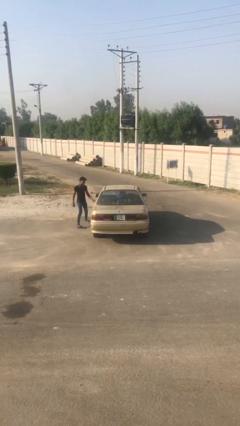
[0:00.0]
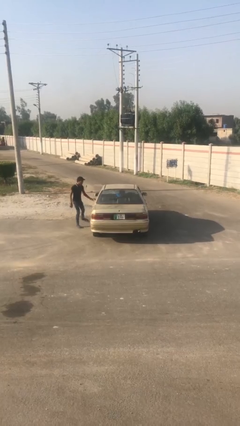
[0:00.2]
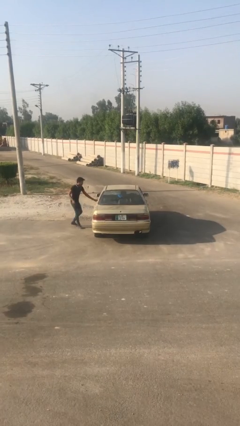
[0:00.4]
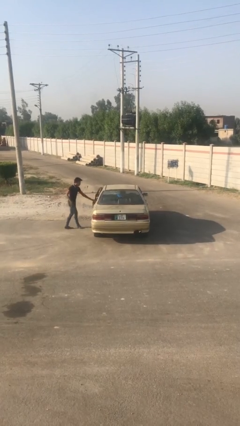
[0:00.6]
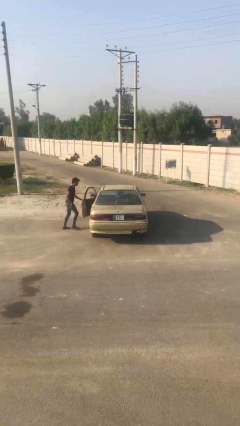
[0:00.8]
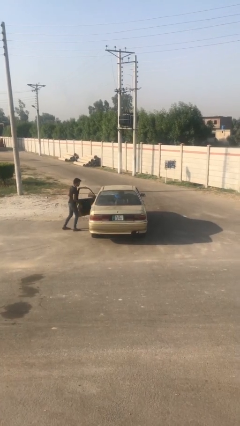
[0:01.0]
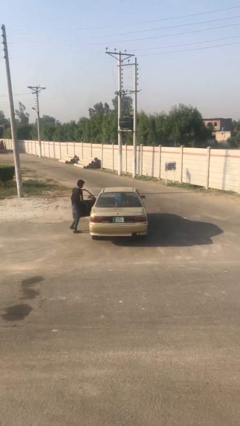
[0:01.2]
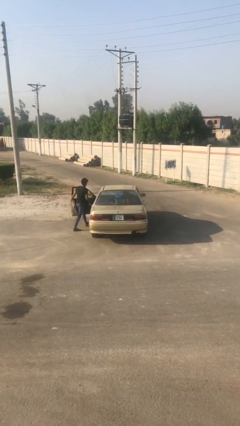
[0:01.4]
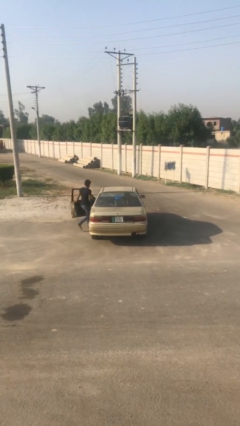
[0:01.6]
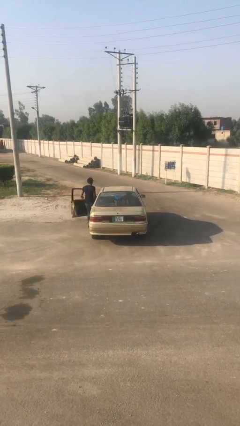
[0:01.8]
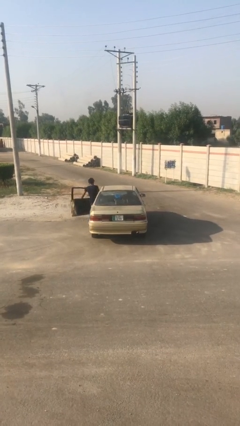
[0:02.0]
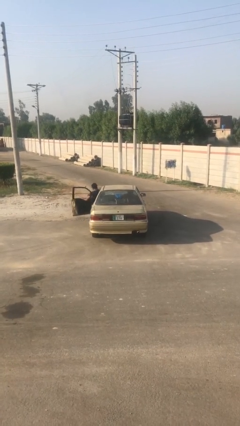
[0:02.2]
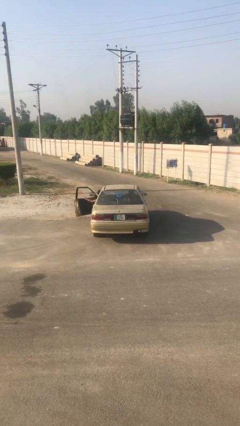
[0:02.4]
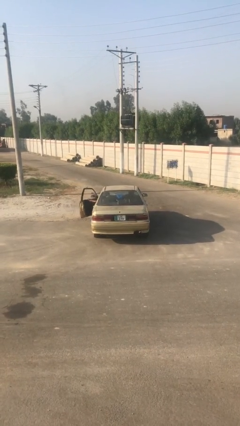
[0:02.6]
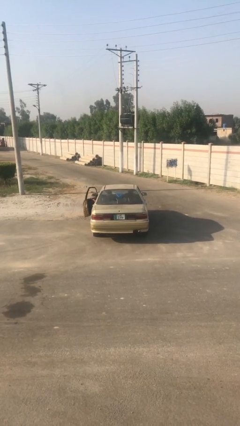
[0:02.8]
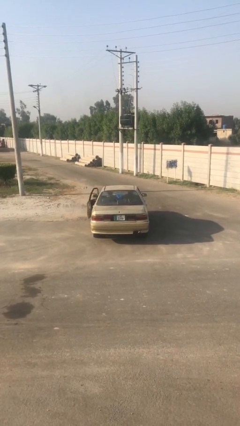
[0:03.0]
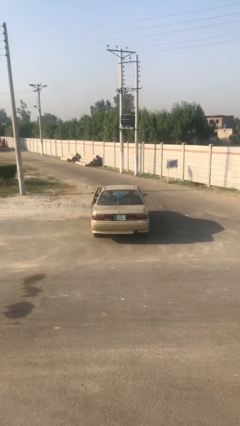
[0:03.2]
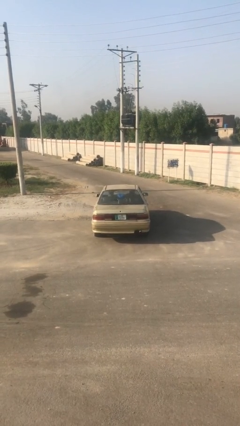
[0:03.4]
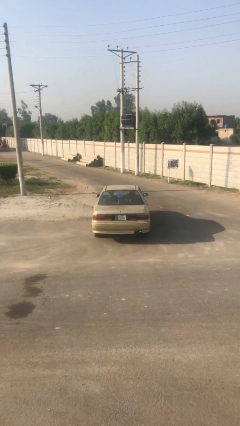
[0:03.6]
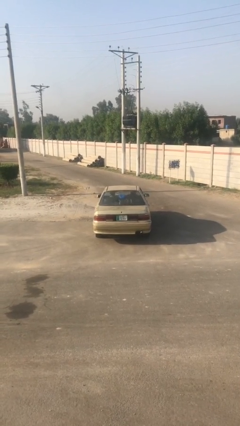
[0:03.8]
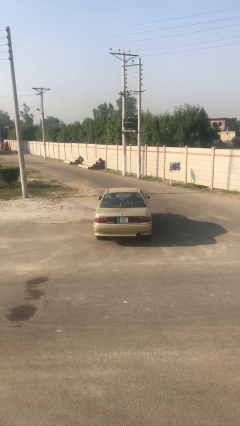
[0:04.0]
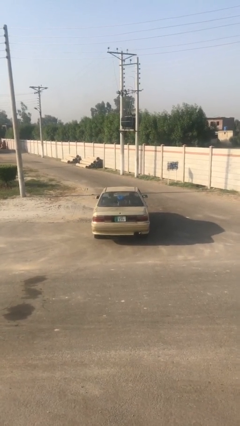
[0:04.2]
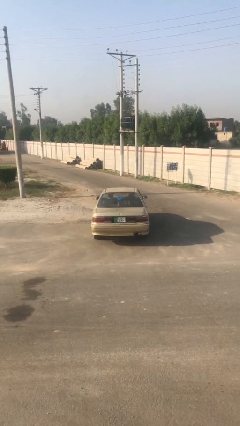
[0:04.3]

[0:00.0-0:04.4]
car picks up person

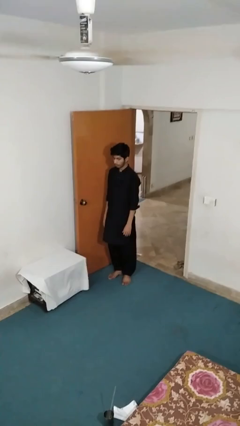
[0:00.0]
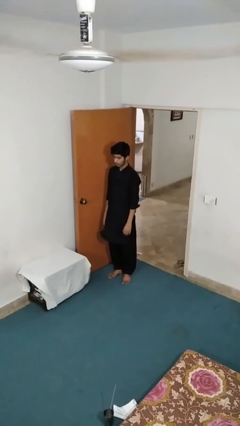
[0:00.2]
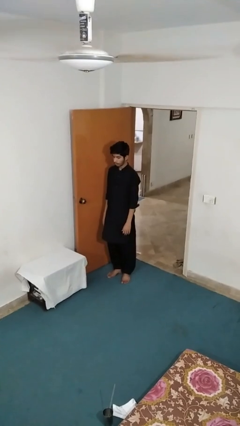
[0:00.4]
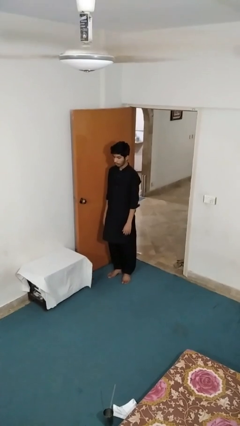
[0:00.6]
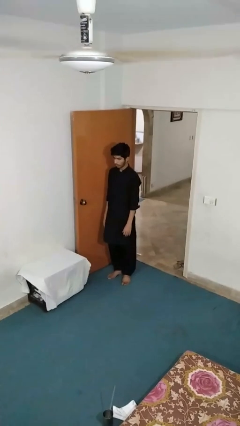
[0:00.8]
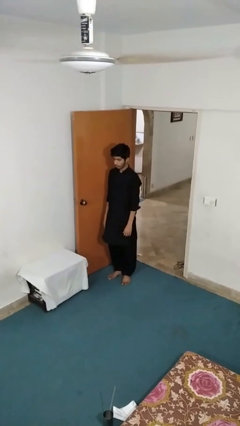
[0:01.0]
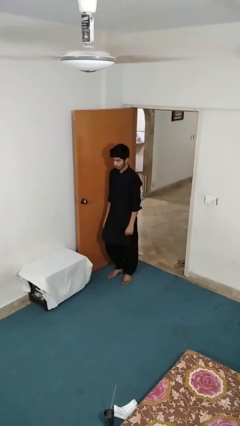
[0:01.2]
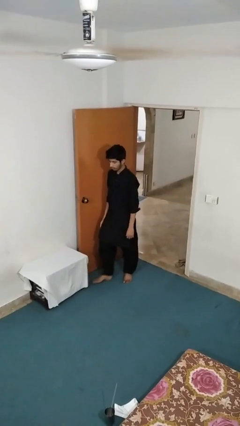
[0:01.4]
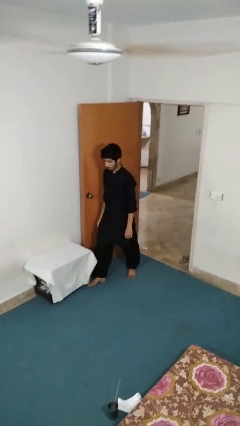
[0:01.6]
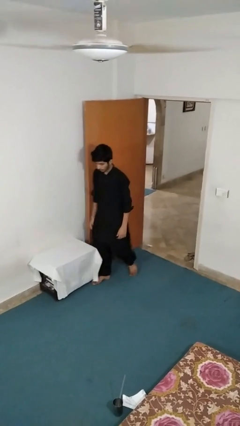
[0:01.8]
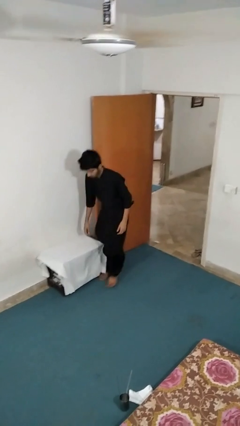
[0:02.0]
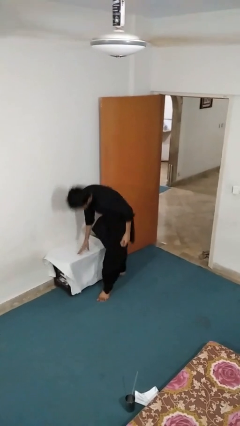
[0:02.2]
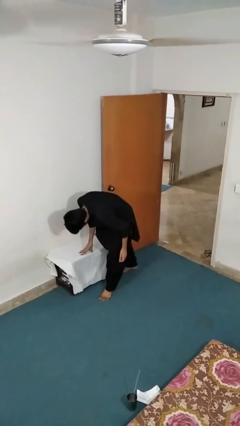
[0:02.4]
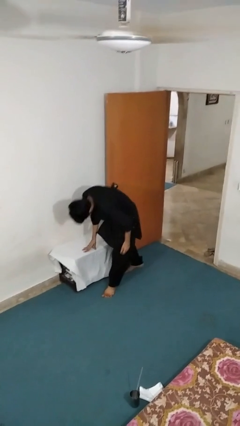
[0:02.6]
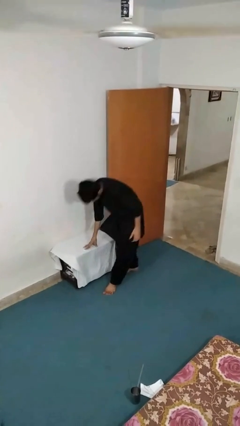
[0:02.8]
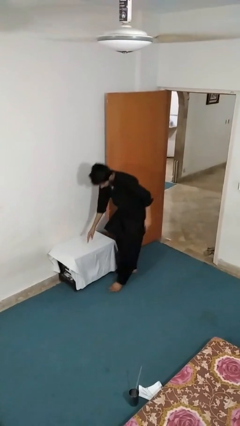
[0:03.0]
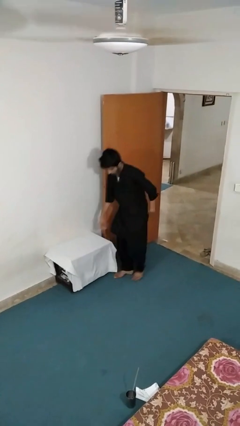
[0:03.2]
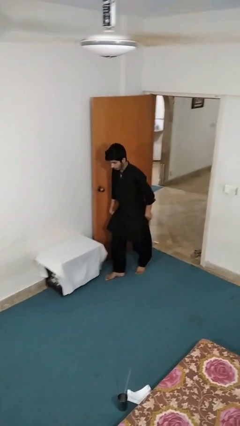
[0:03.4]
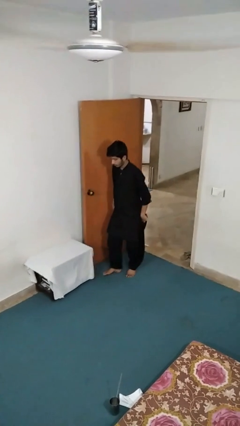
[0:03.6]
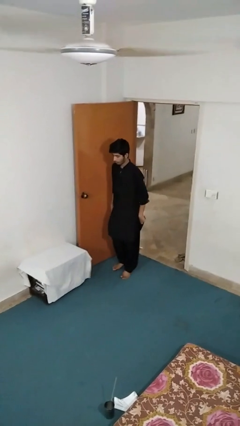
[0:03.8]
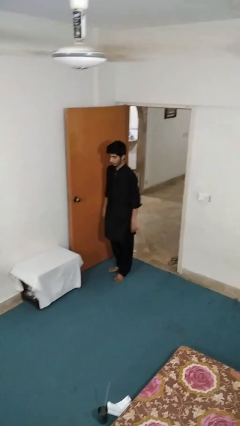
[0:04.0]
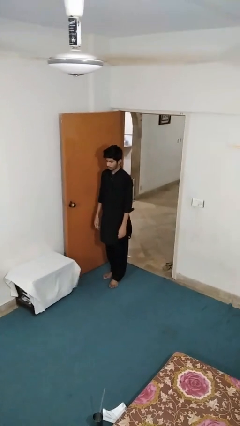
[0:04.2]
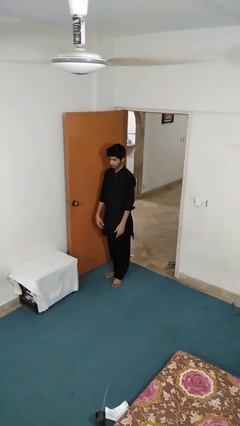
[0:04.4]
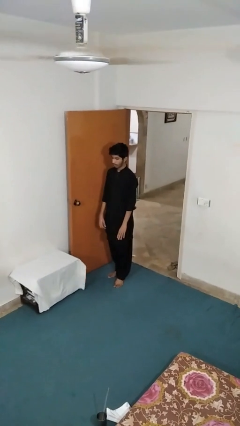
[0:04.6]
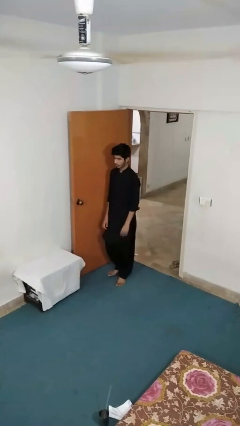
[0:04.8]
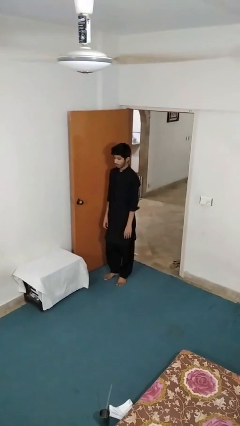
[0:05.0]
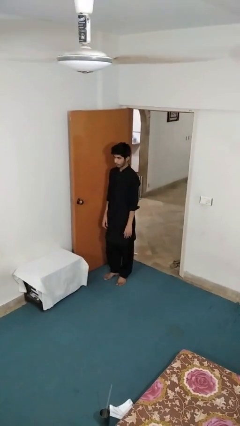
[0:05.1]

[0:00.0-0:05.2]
person bumps into table

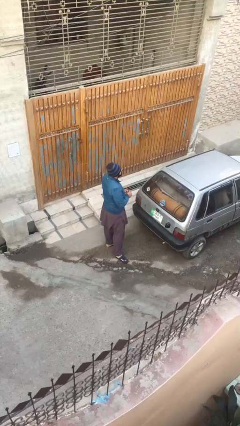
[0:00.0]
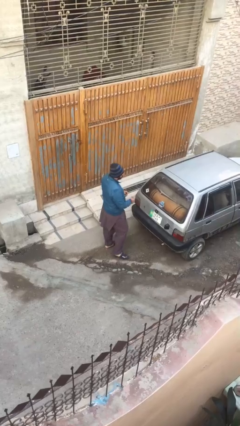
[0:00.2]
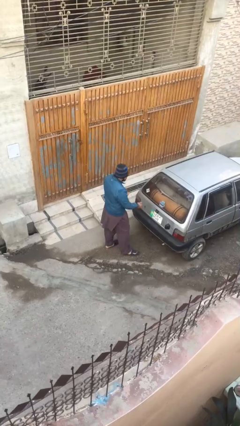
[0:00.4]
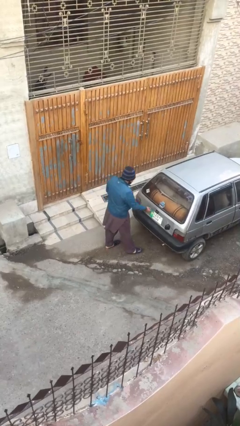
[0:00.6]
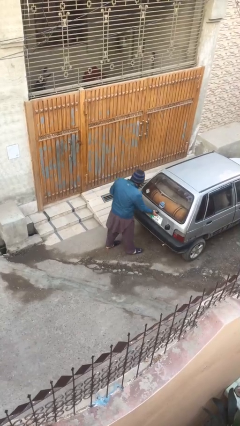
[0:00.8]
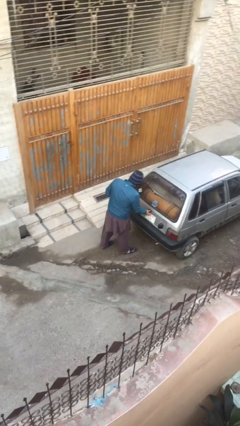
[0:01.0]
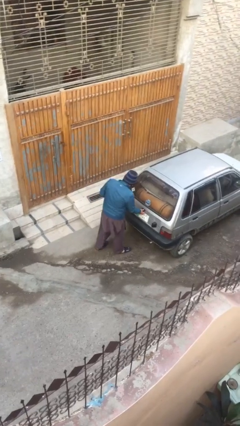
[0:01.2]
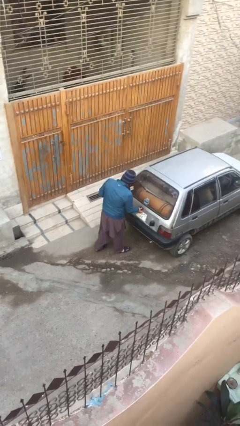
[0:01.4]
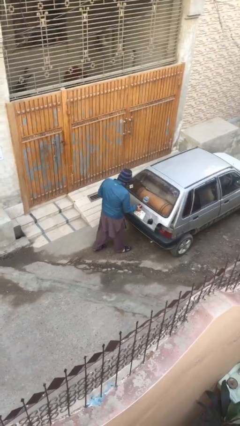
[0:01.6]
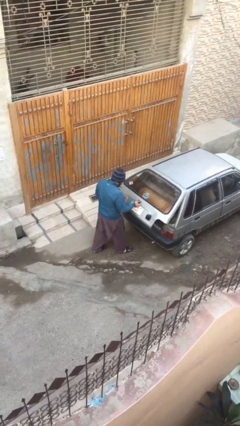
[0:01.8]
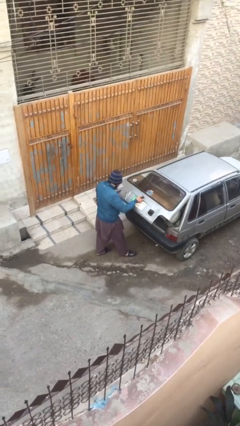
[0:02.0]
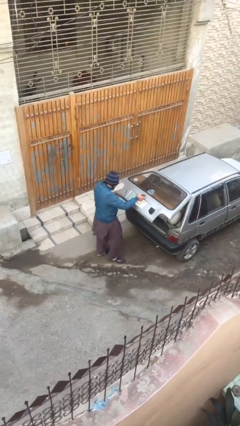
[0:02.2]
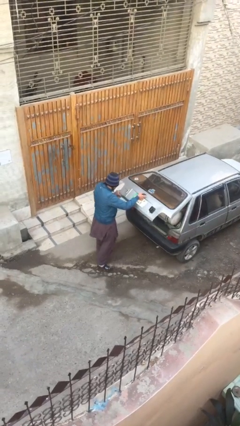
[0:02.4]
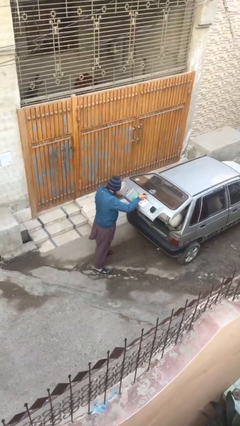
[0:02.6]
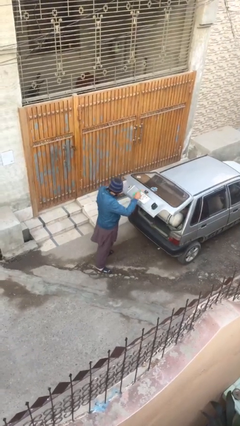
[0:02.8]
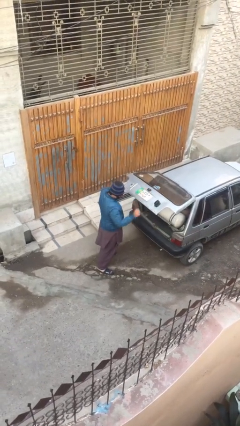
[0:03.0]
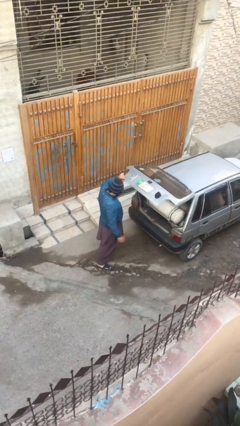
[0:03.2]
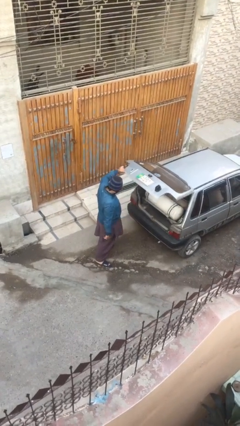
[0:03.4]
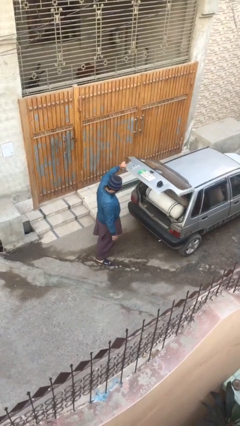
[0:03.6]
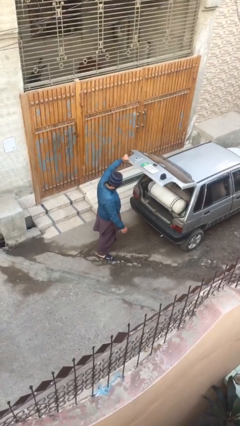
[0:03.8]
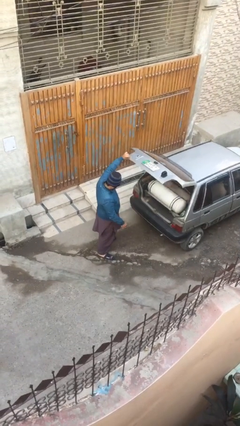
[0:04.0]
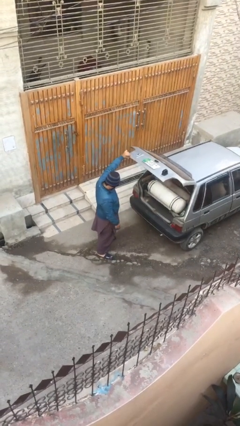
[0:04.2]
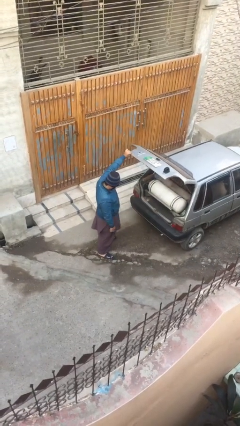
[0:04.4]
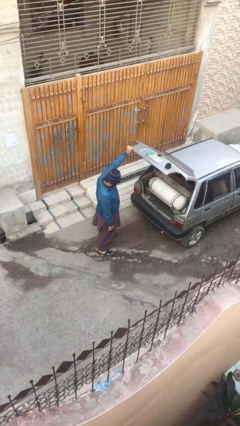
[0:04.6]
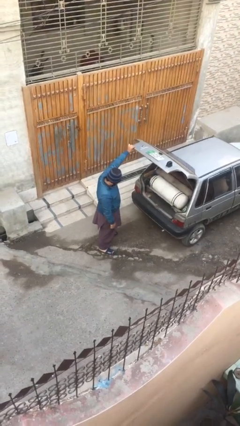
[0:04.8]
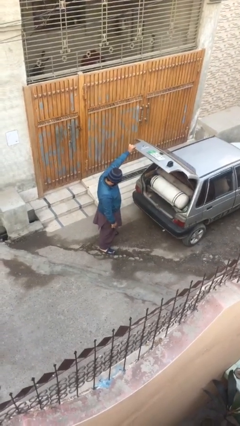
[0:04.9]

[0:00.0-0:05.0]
person opens car trunk

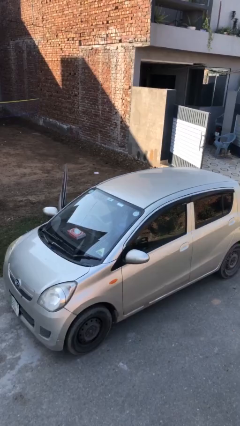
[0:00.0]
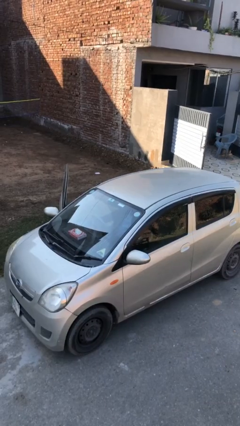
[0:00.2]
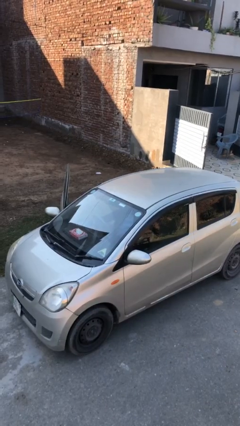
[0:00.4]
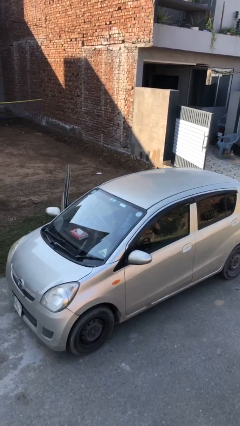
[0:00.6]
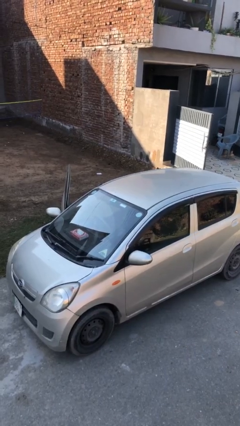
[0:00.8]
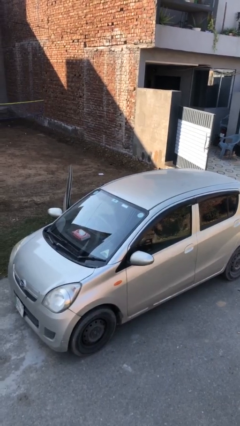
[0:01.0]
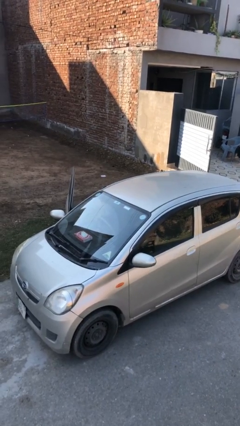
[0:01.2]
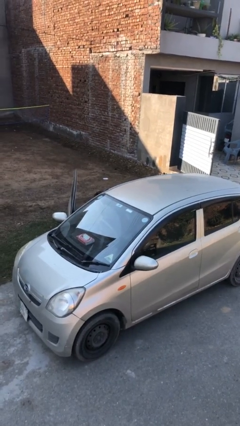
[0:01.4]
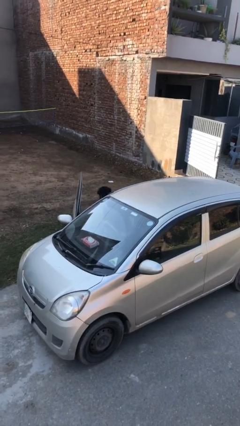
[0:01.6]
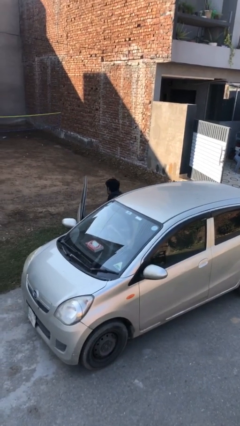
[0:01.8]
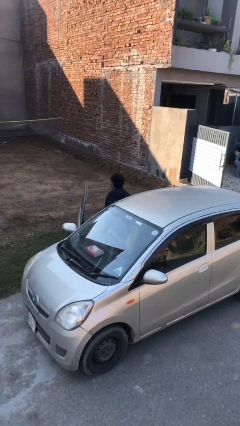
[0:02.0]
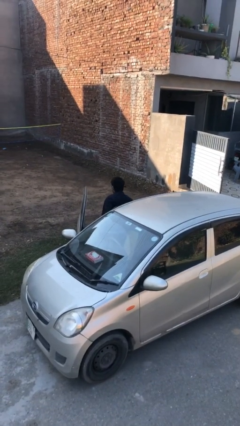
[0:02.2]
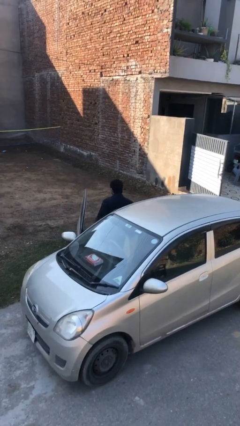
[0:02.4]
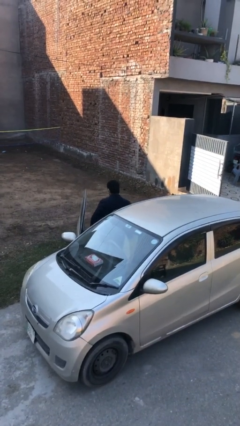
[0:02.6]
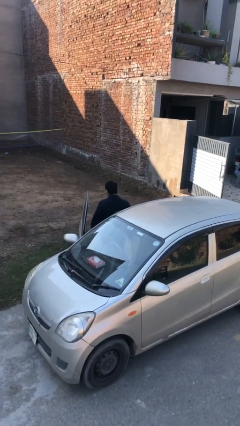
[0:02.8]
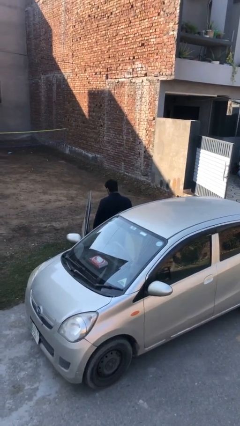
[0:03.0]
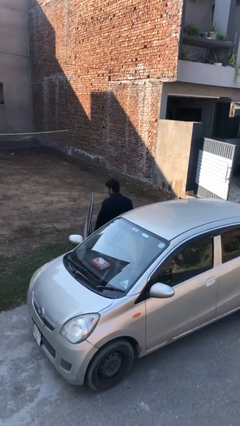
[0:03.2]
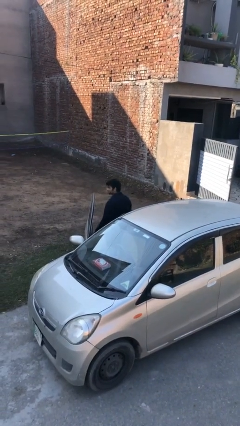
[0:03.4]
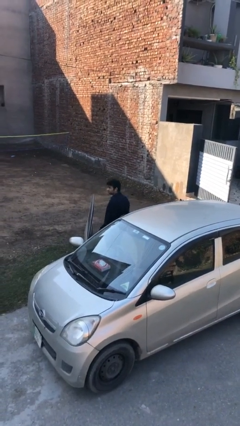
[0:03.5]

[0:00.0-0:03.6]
person exits car
